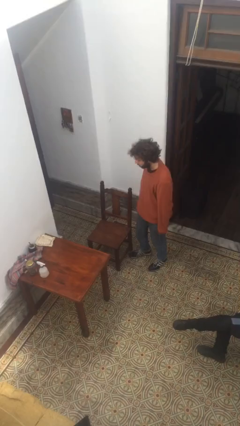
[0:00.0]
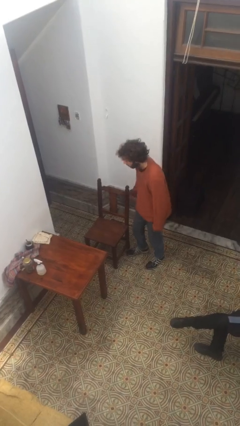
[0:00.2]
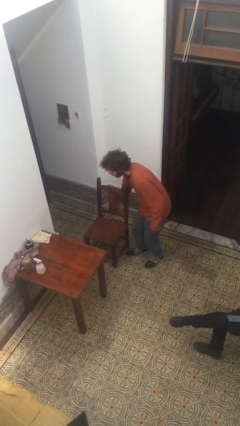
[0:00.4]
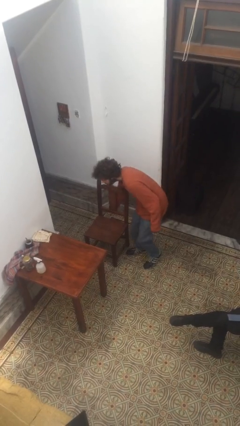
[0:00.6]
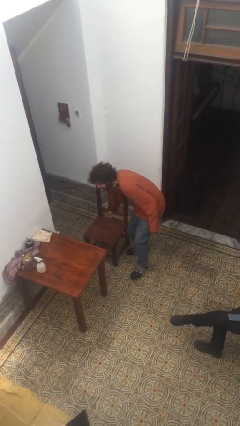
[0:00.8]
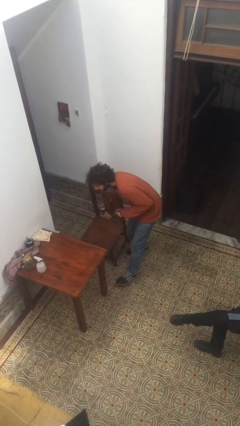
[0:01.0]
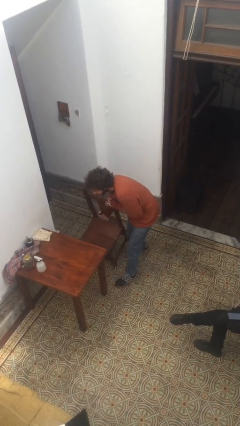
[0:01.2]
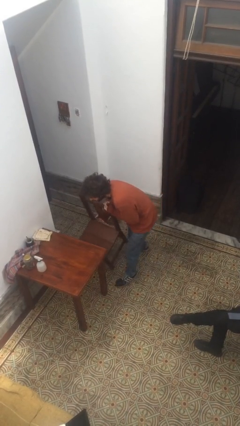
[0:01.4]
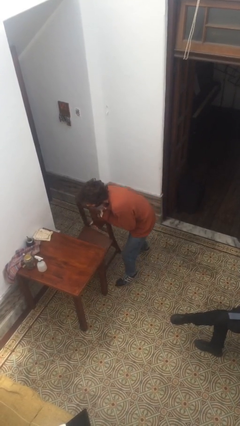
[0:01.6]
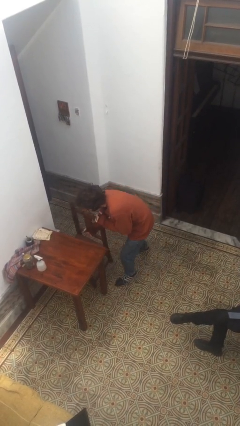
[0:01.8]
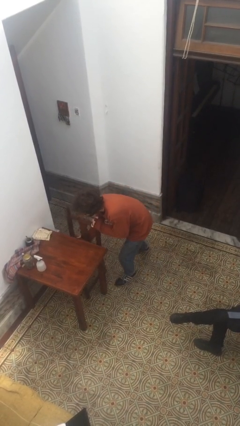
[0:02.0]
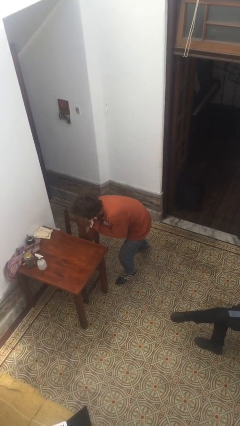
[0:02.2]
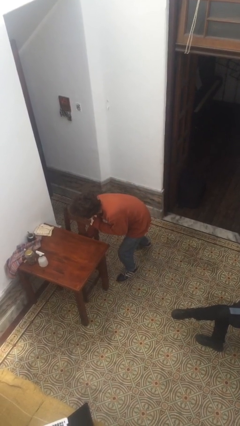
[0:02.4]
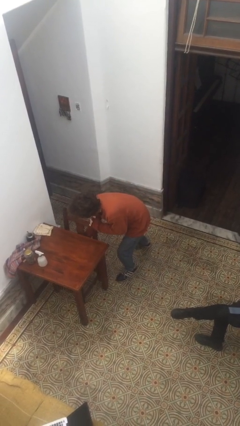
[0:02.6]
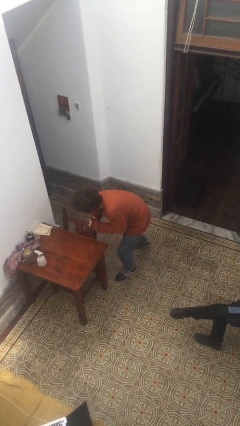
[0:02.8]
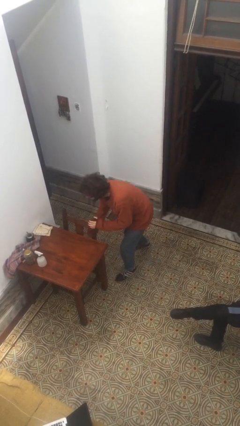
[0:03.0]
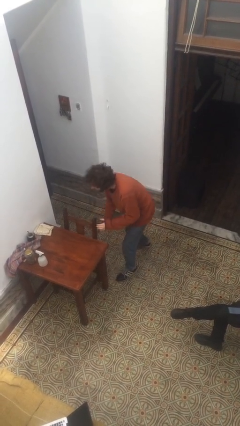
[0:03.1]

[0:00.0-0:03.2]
person pushes in chair

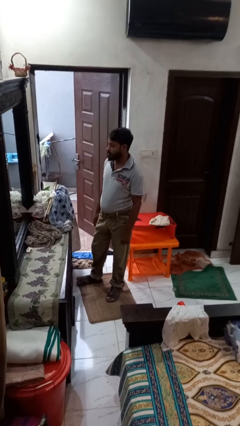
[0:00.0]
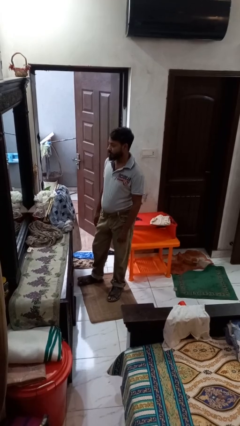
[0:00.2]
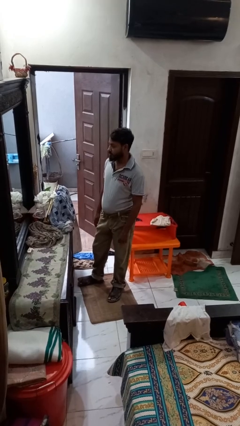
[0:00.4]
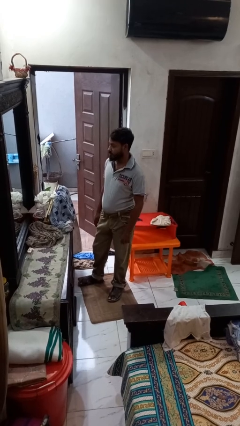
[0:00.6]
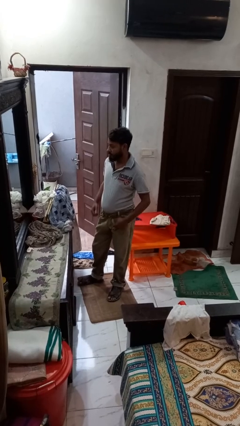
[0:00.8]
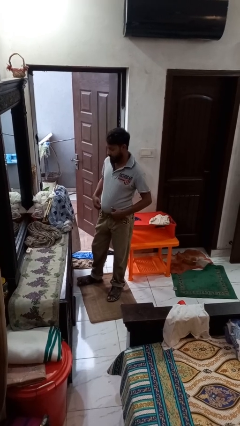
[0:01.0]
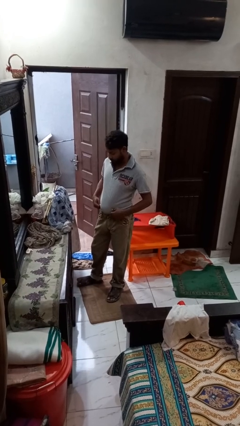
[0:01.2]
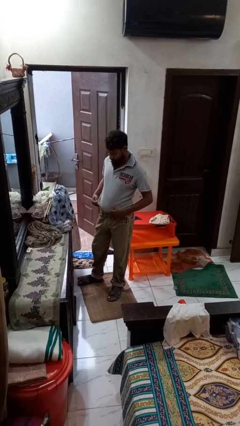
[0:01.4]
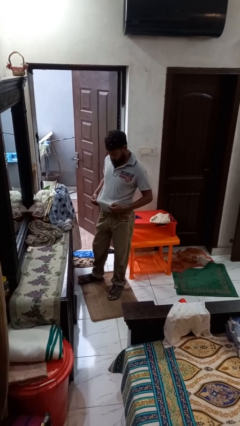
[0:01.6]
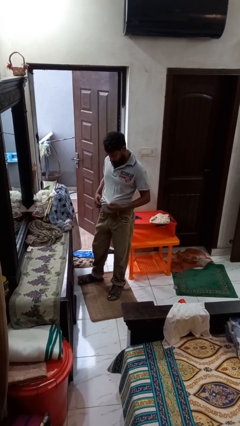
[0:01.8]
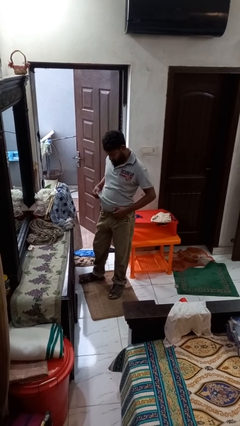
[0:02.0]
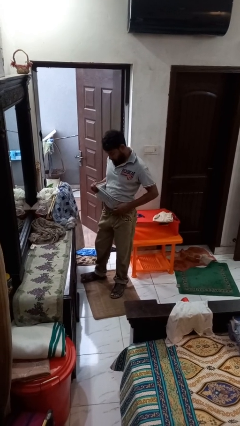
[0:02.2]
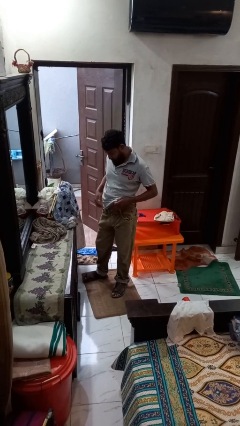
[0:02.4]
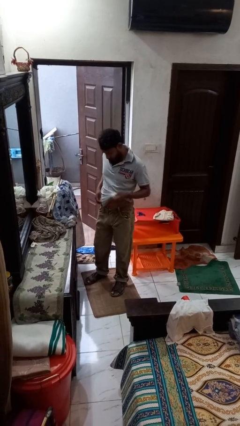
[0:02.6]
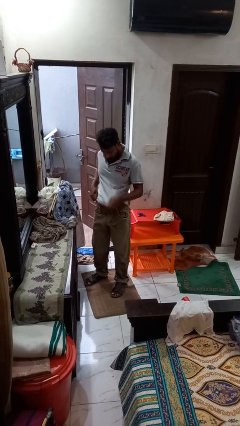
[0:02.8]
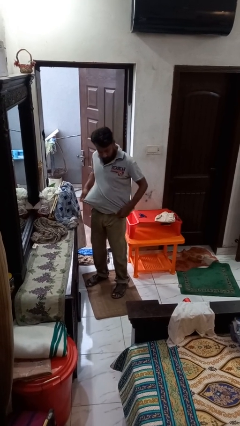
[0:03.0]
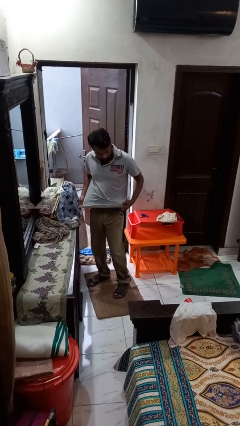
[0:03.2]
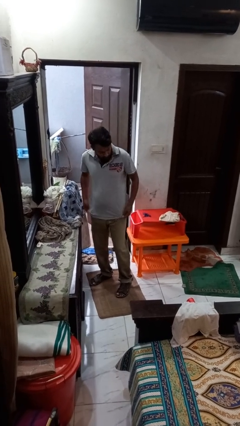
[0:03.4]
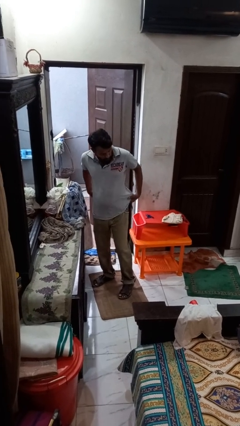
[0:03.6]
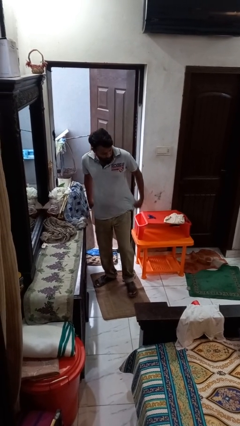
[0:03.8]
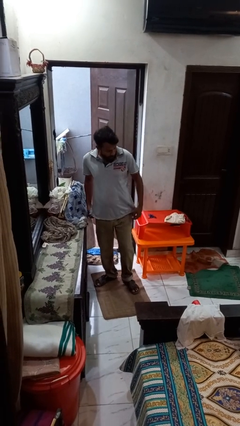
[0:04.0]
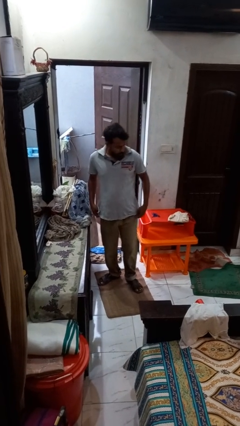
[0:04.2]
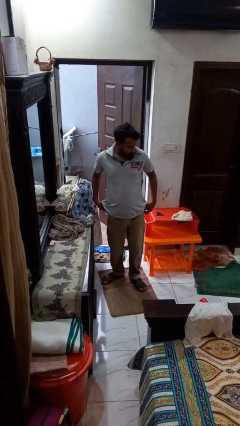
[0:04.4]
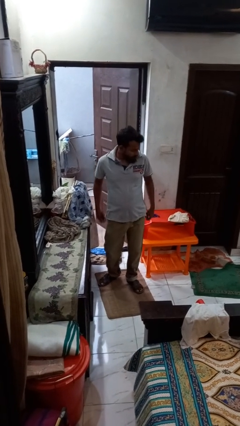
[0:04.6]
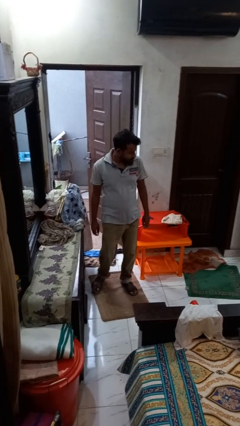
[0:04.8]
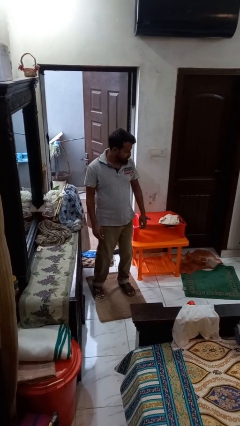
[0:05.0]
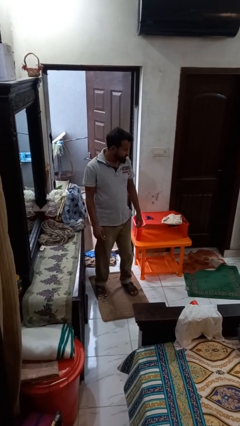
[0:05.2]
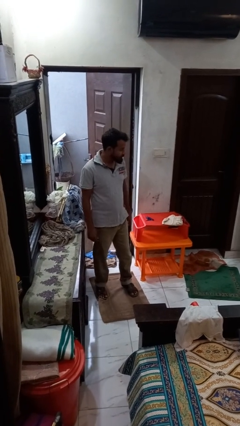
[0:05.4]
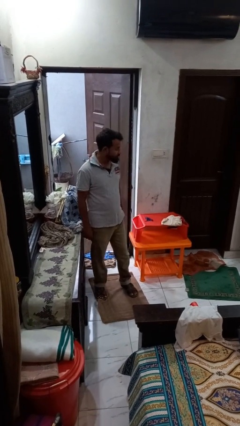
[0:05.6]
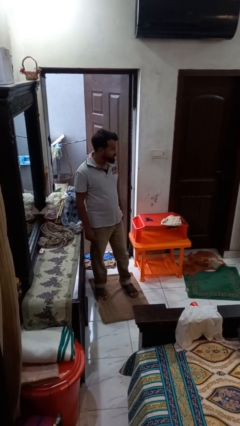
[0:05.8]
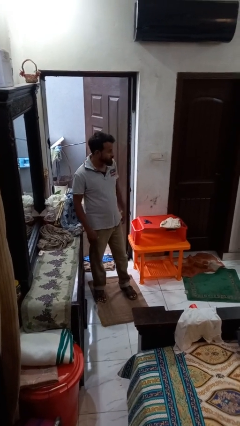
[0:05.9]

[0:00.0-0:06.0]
person untucks shirt

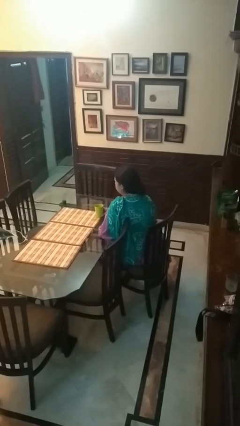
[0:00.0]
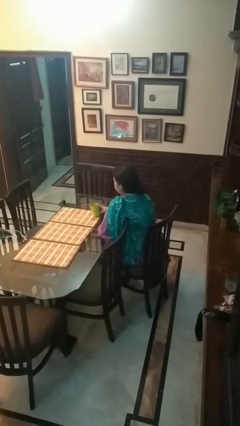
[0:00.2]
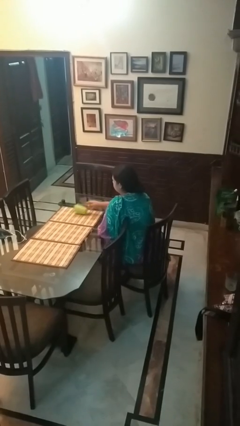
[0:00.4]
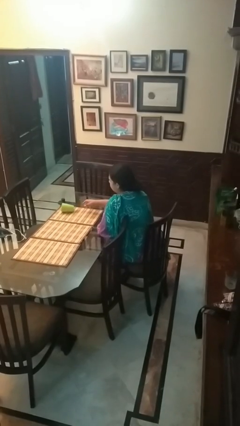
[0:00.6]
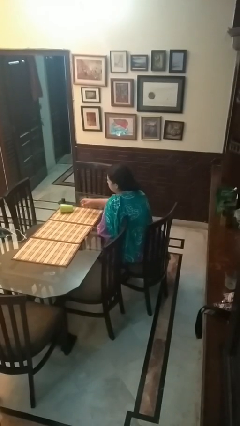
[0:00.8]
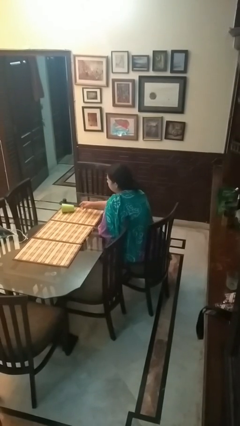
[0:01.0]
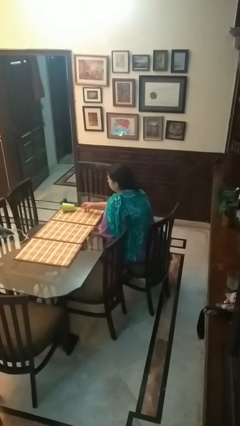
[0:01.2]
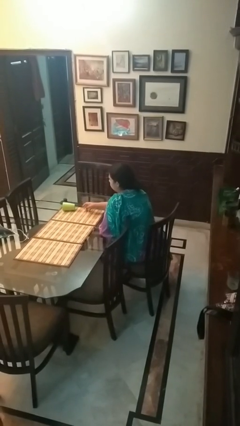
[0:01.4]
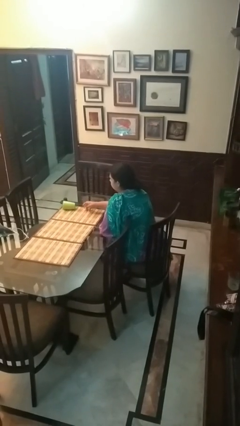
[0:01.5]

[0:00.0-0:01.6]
person knocks over glass

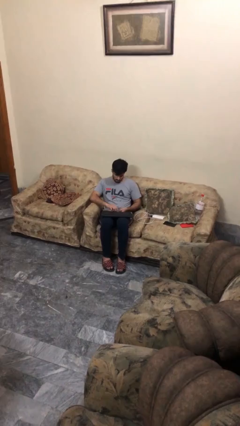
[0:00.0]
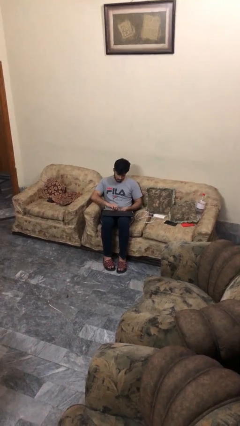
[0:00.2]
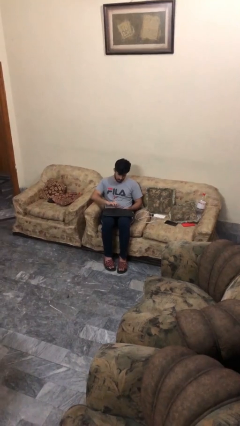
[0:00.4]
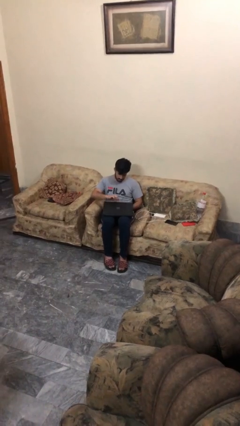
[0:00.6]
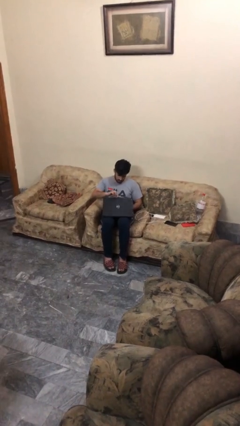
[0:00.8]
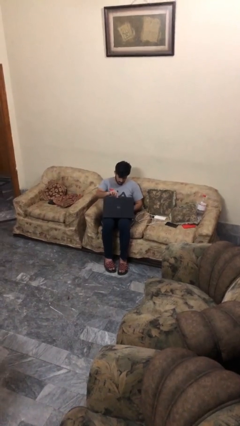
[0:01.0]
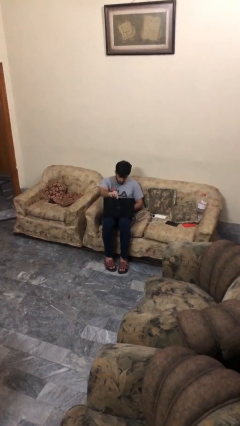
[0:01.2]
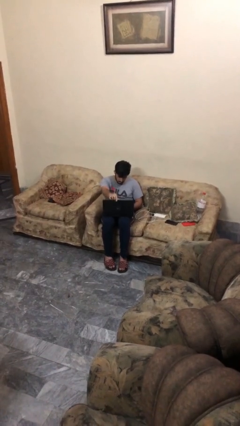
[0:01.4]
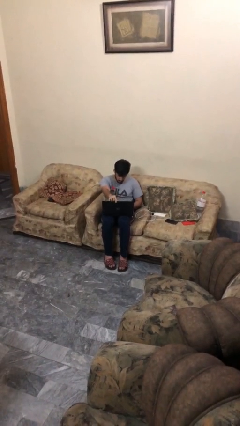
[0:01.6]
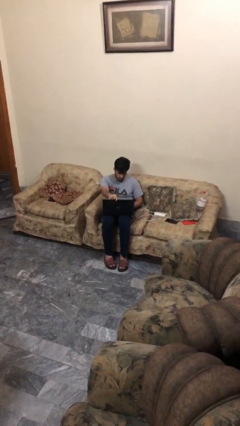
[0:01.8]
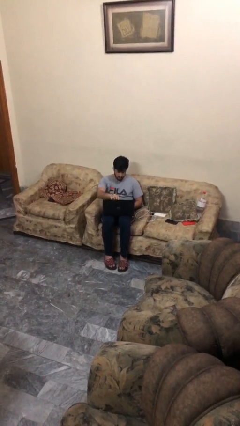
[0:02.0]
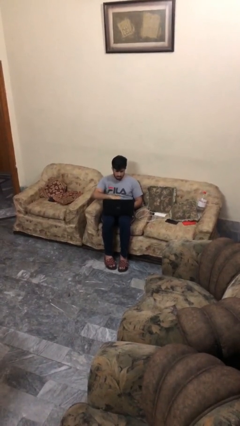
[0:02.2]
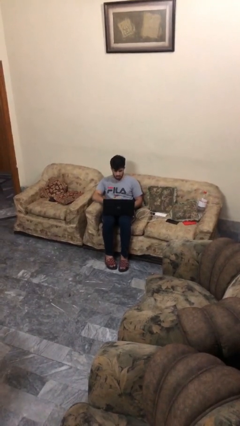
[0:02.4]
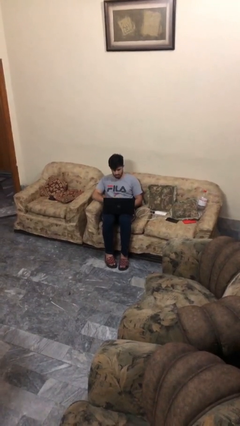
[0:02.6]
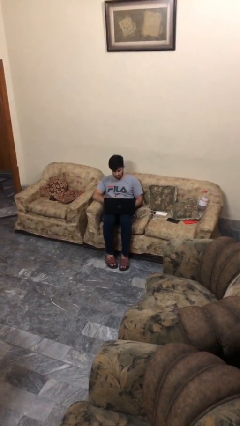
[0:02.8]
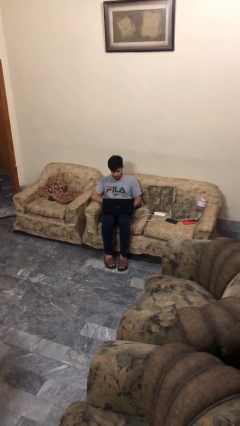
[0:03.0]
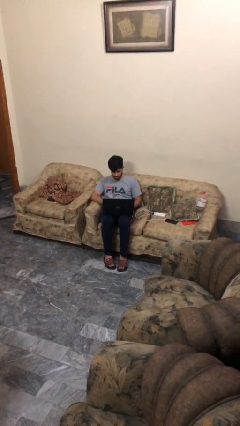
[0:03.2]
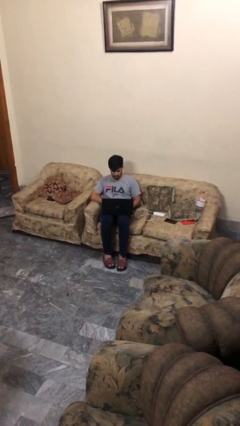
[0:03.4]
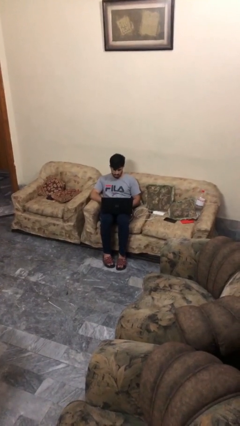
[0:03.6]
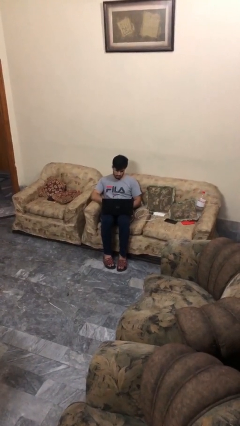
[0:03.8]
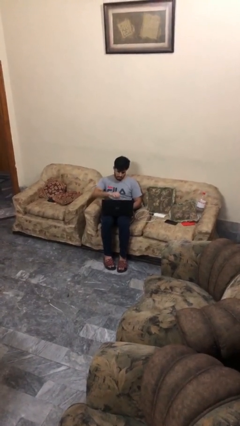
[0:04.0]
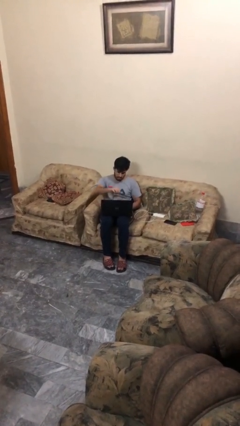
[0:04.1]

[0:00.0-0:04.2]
person opens laptop

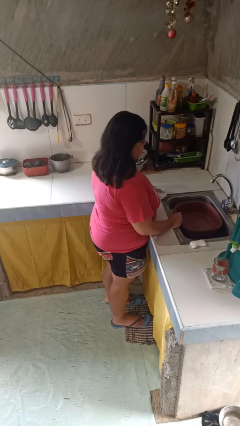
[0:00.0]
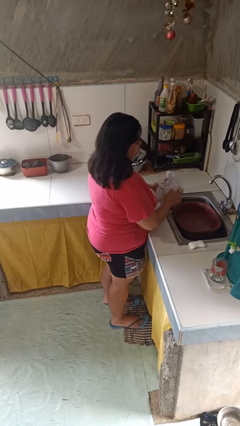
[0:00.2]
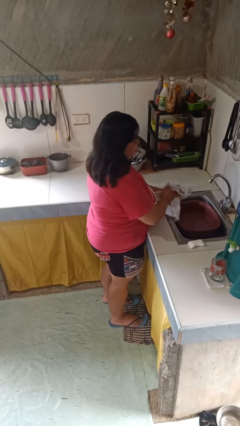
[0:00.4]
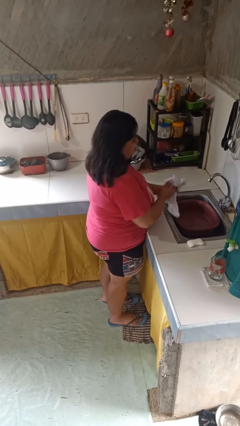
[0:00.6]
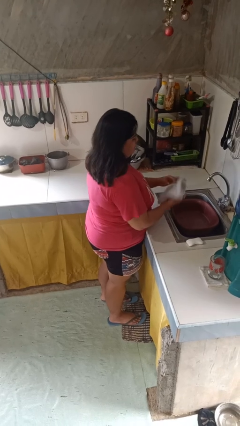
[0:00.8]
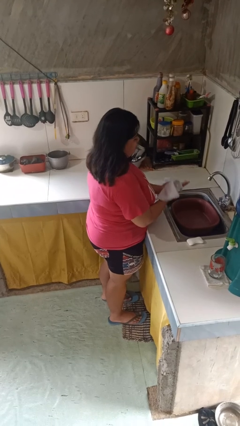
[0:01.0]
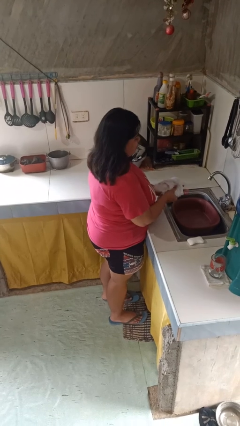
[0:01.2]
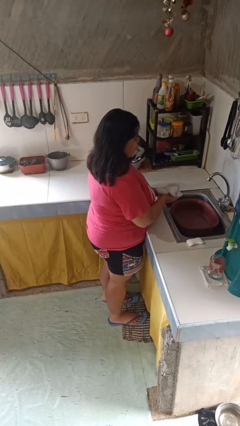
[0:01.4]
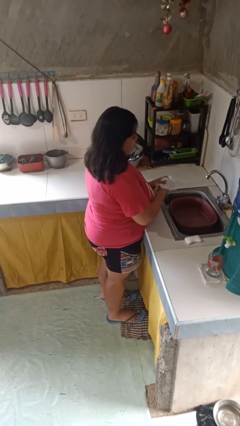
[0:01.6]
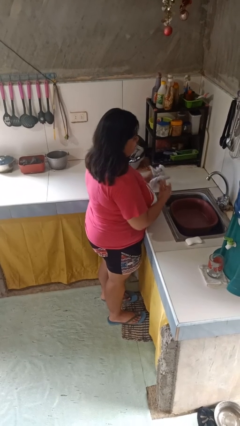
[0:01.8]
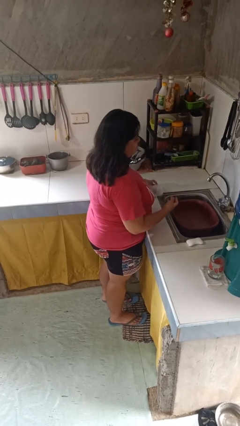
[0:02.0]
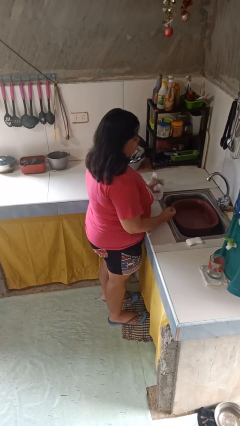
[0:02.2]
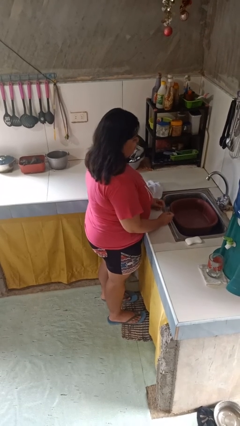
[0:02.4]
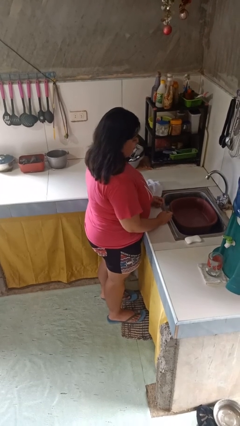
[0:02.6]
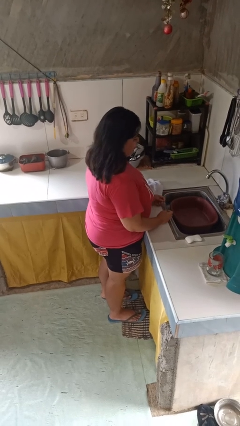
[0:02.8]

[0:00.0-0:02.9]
person dries hands with towel
